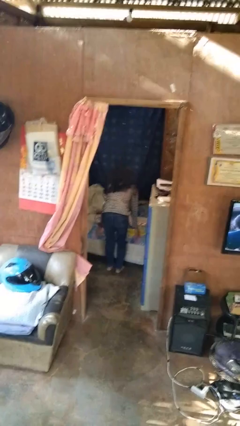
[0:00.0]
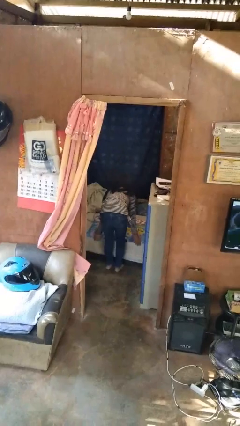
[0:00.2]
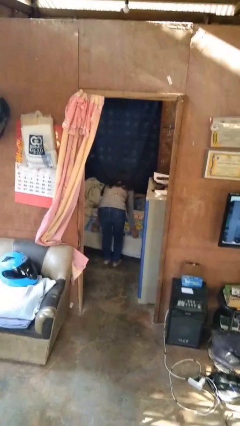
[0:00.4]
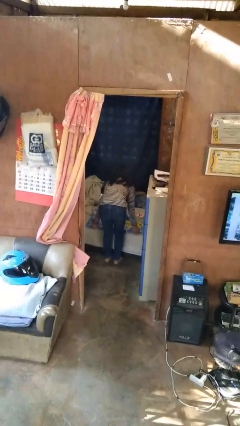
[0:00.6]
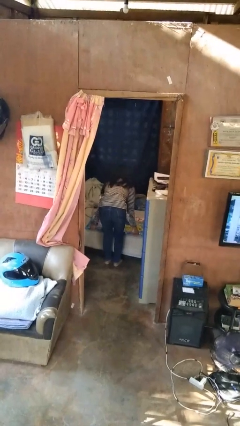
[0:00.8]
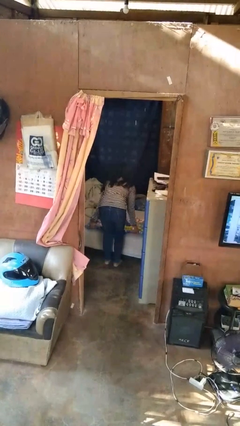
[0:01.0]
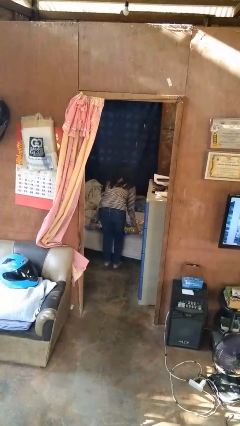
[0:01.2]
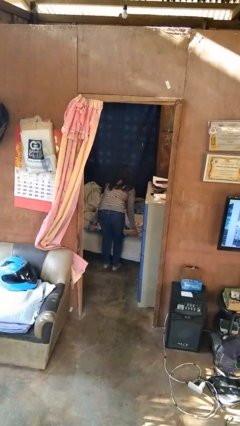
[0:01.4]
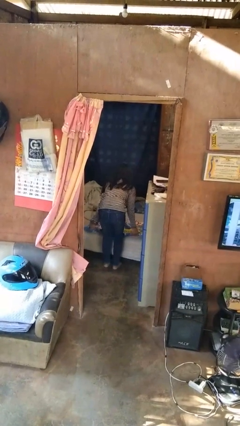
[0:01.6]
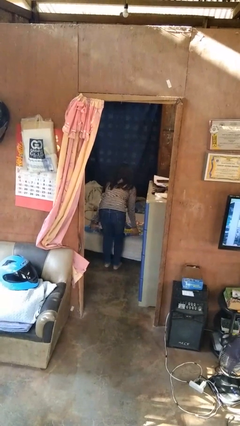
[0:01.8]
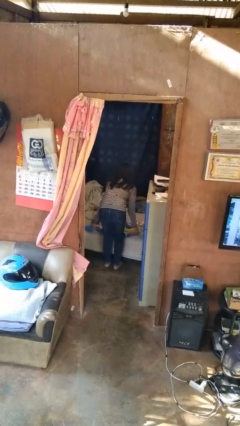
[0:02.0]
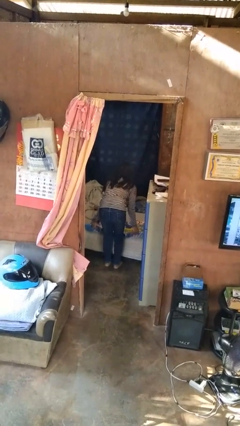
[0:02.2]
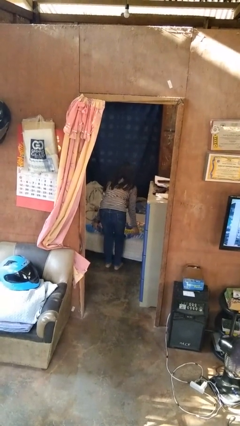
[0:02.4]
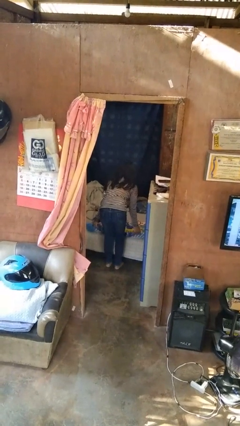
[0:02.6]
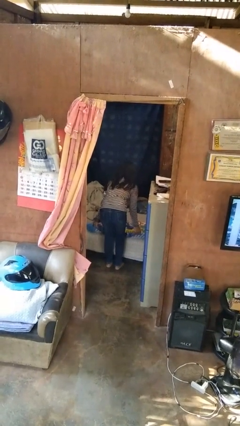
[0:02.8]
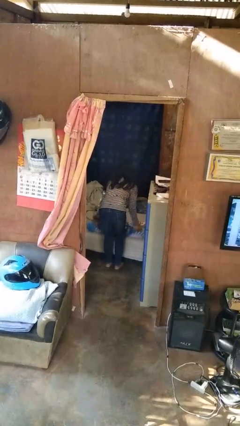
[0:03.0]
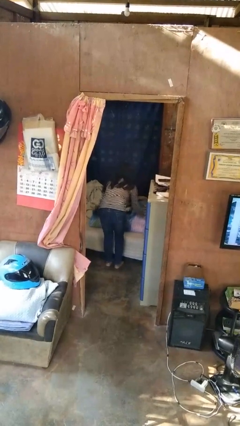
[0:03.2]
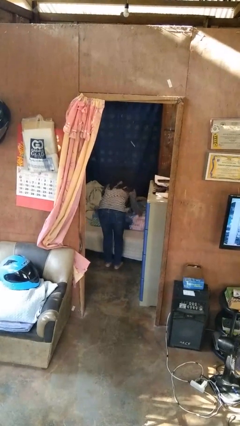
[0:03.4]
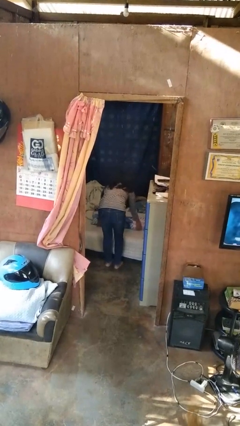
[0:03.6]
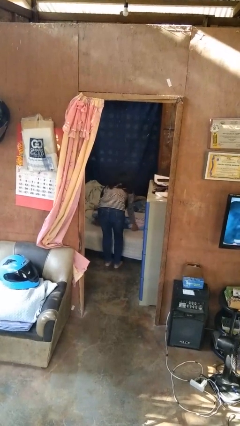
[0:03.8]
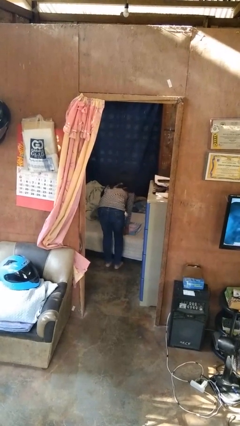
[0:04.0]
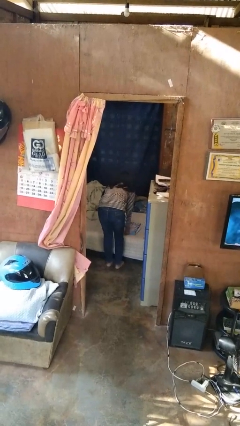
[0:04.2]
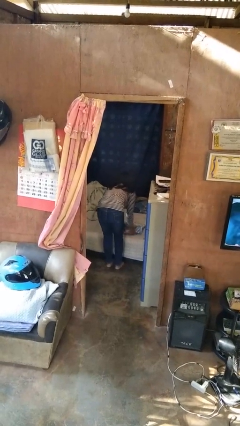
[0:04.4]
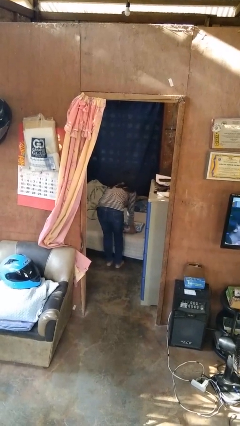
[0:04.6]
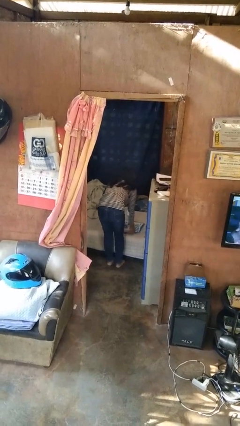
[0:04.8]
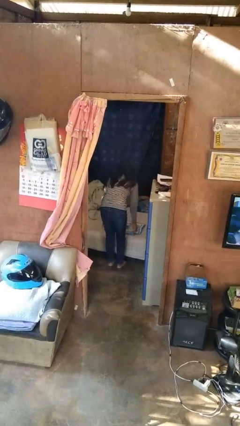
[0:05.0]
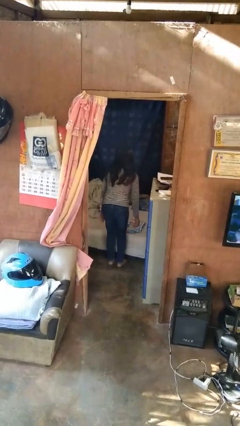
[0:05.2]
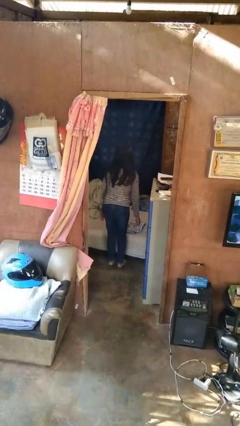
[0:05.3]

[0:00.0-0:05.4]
person folds blanket

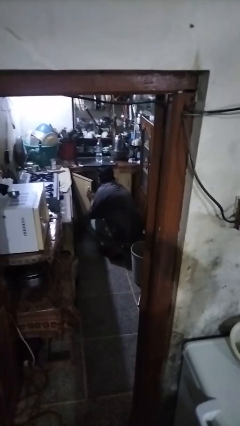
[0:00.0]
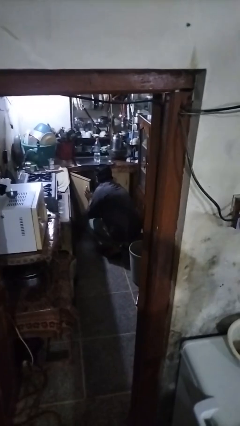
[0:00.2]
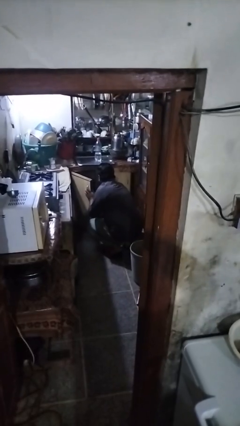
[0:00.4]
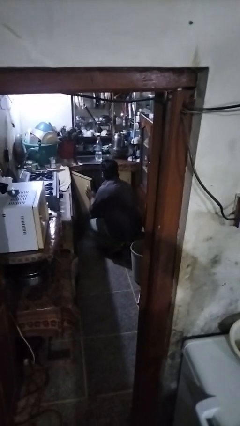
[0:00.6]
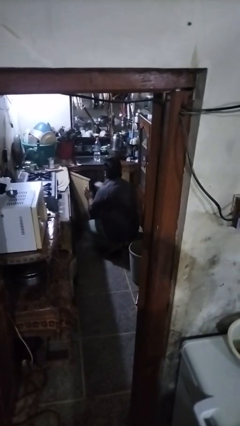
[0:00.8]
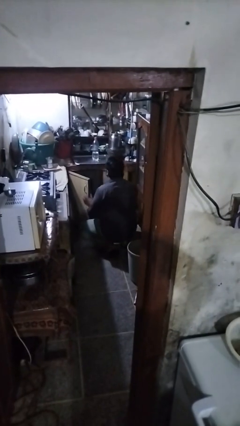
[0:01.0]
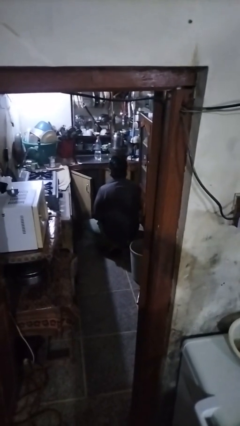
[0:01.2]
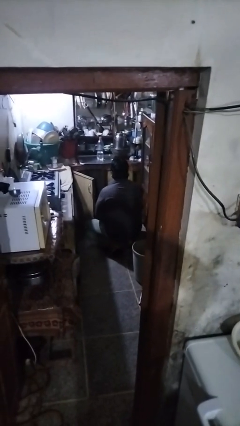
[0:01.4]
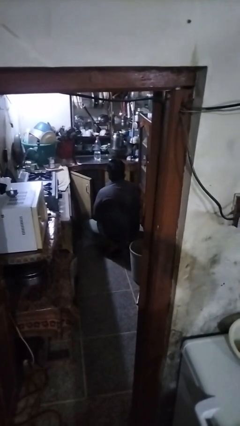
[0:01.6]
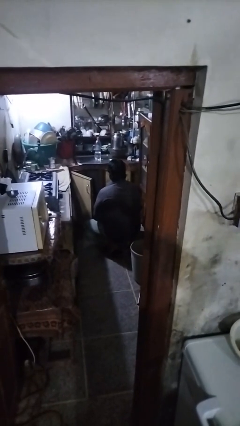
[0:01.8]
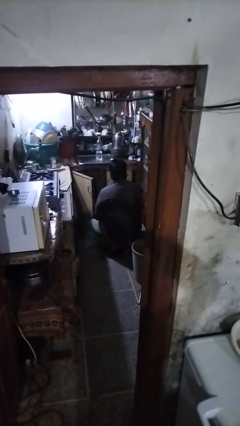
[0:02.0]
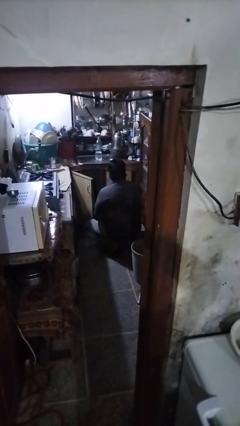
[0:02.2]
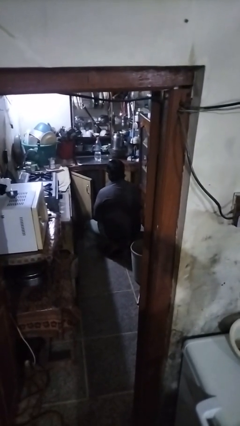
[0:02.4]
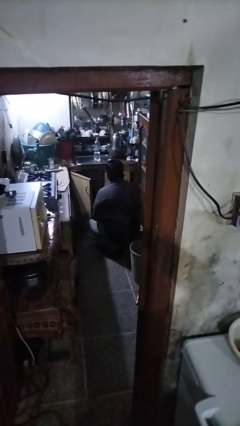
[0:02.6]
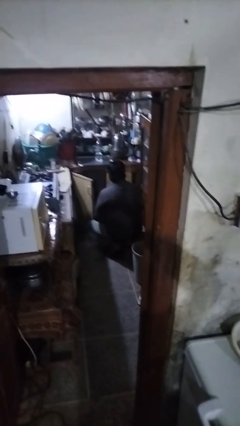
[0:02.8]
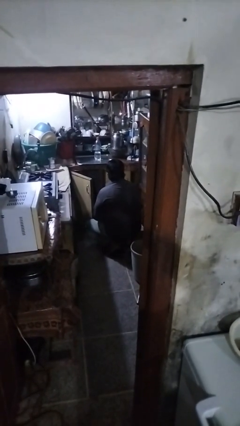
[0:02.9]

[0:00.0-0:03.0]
person takes object from cabinet

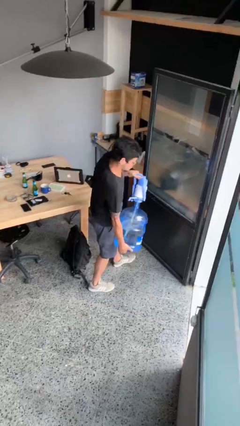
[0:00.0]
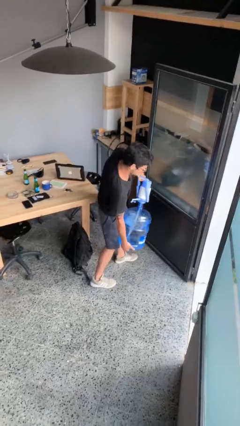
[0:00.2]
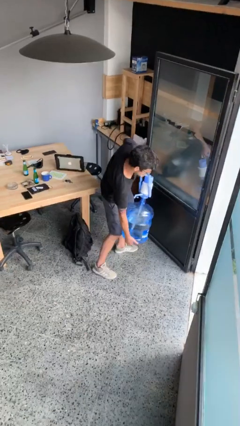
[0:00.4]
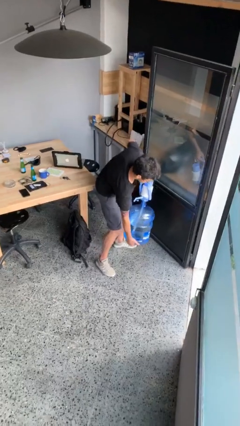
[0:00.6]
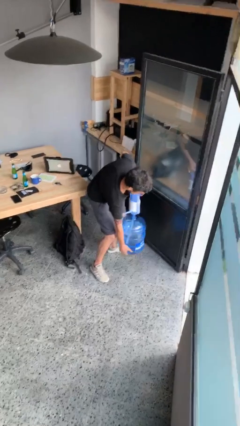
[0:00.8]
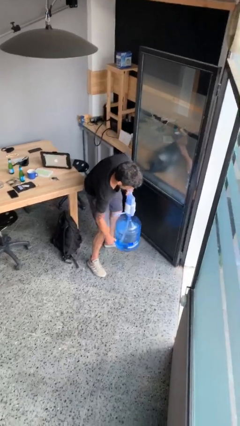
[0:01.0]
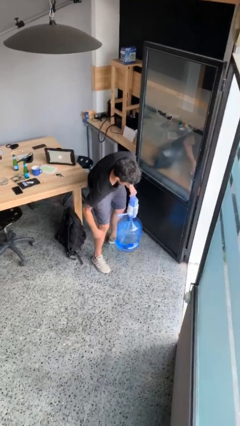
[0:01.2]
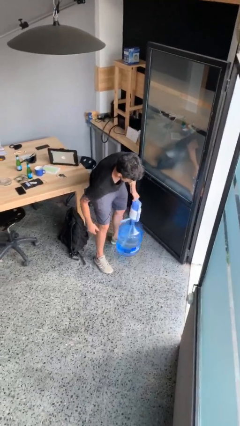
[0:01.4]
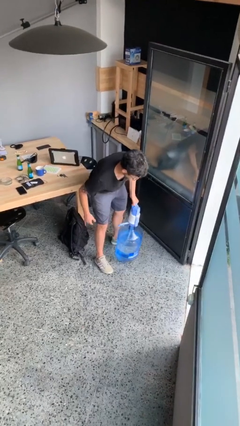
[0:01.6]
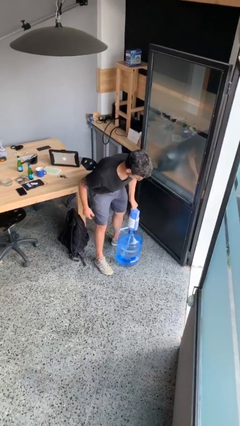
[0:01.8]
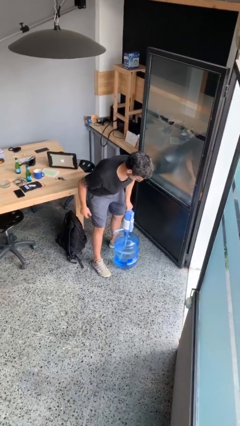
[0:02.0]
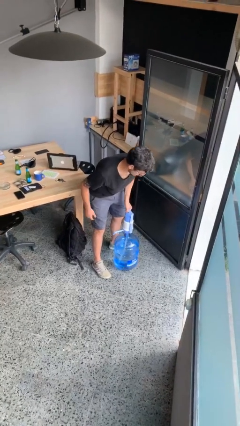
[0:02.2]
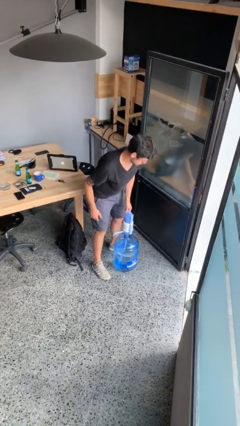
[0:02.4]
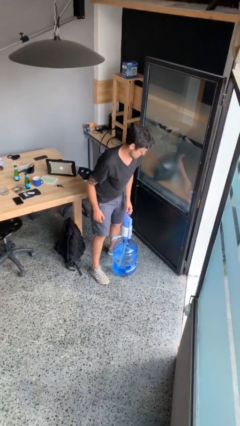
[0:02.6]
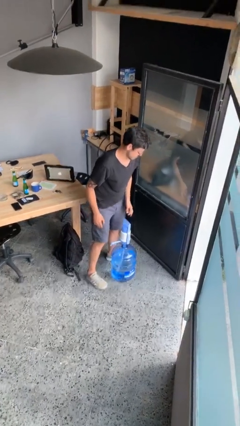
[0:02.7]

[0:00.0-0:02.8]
person puts down object on floor

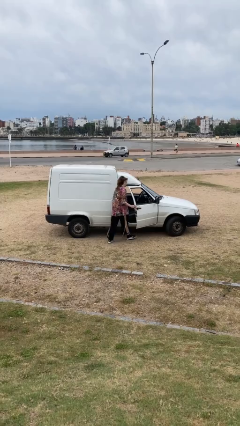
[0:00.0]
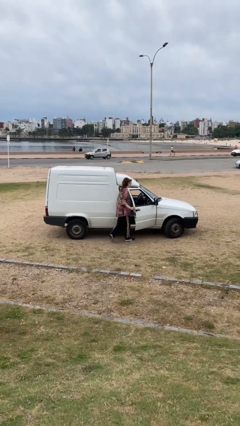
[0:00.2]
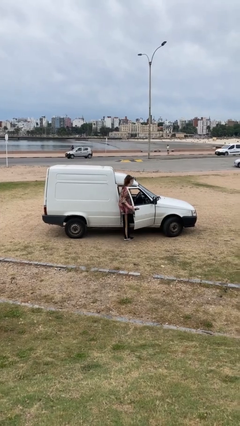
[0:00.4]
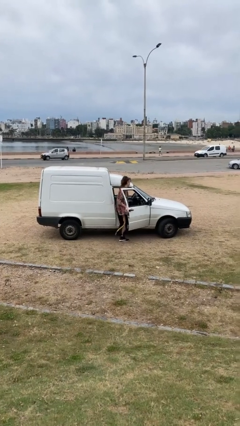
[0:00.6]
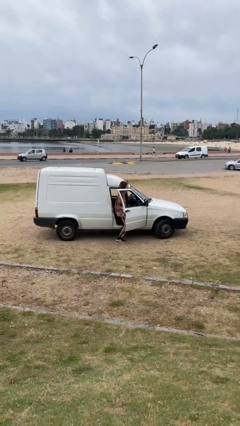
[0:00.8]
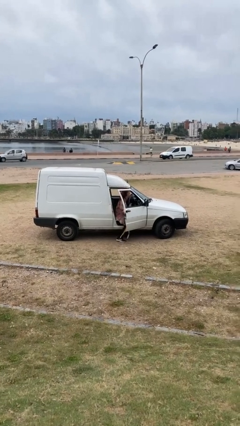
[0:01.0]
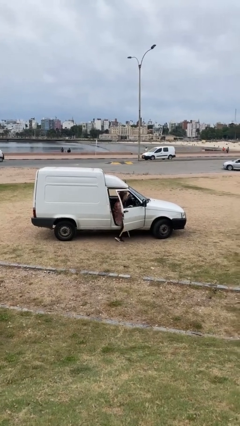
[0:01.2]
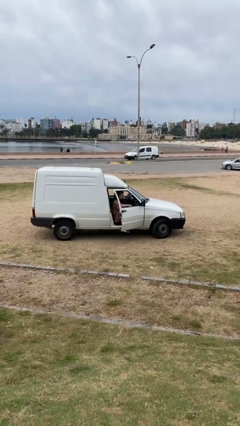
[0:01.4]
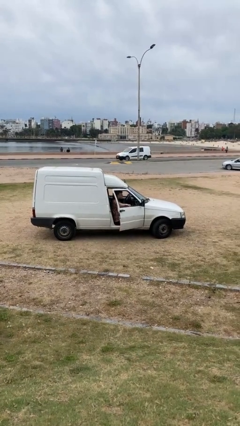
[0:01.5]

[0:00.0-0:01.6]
person enters car

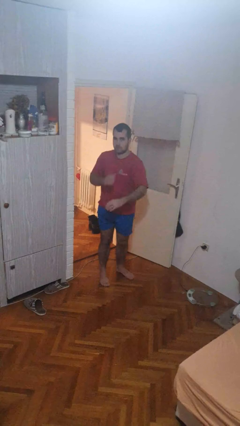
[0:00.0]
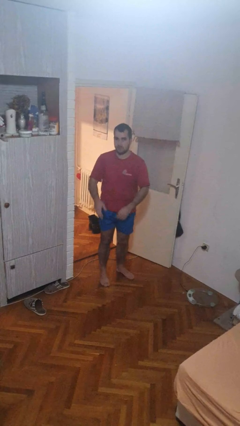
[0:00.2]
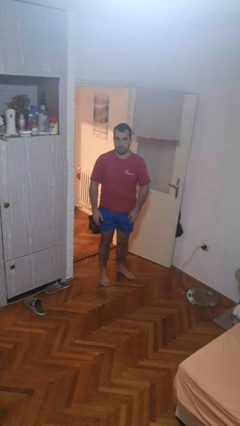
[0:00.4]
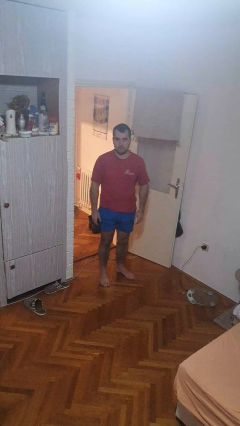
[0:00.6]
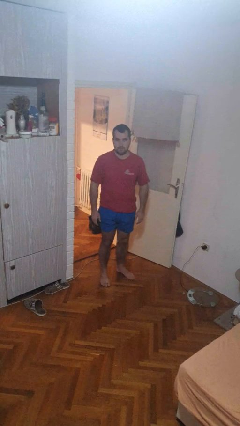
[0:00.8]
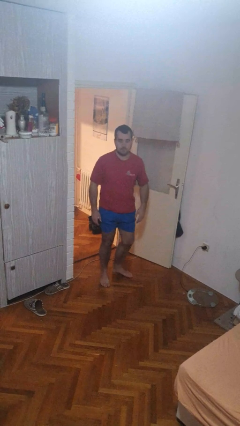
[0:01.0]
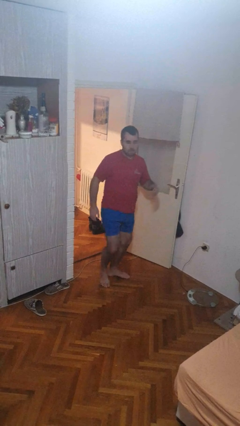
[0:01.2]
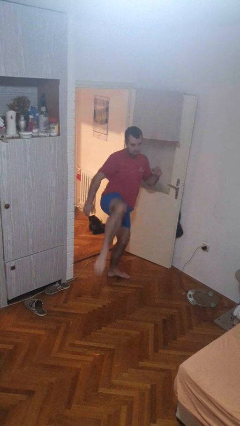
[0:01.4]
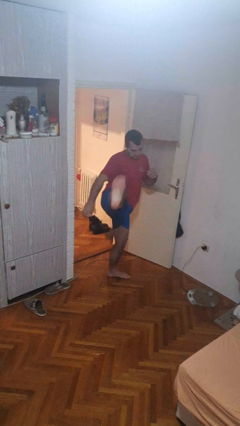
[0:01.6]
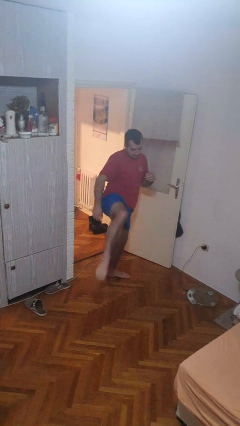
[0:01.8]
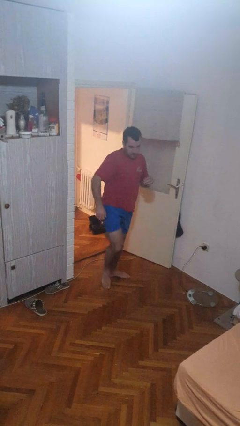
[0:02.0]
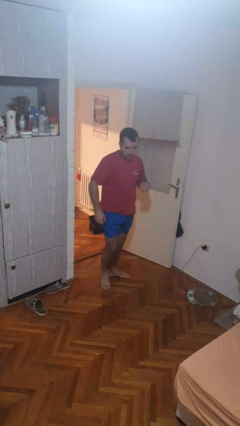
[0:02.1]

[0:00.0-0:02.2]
person karate kicks

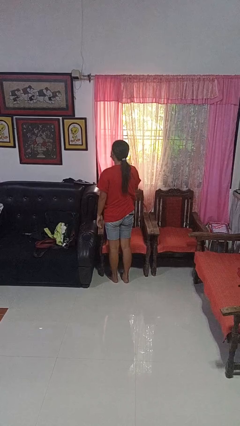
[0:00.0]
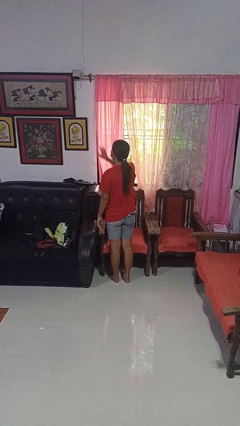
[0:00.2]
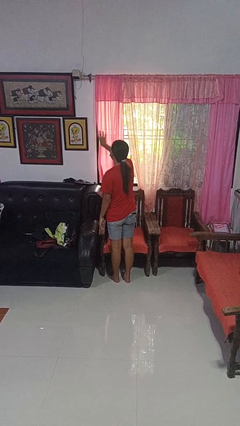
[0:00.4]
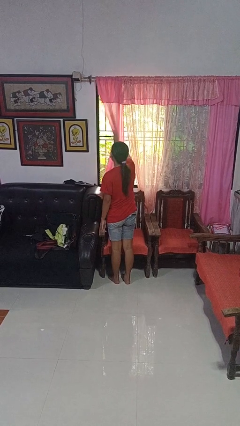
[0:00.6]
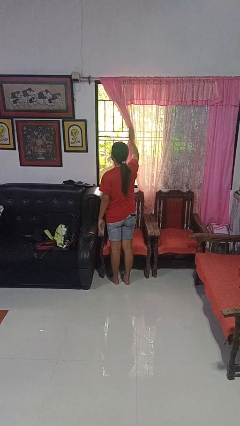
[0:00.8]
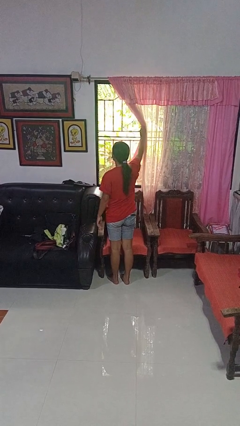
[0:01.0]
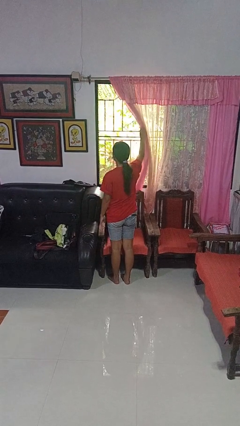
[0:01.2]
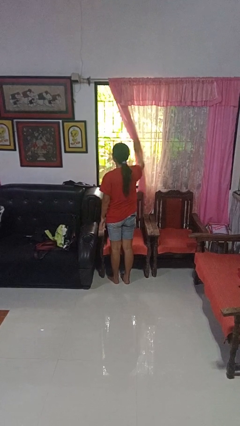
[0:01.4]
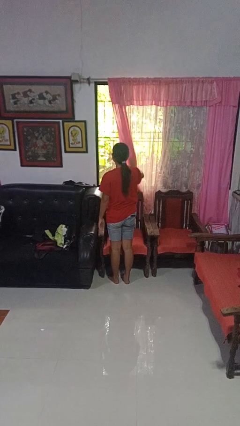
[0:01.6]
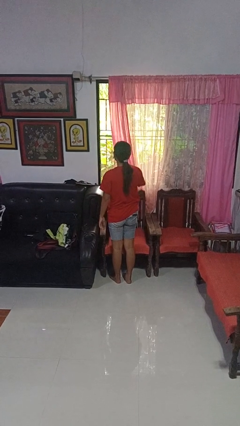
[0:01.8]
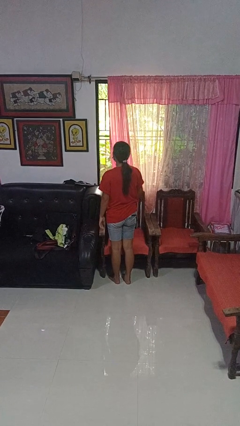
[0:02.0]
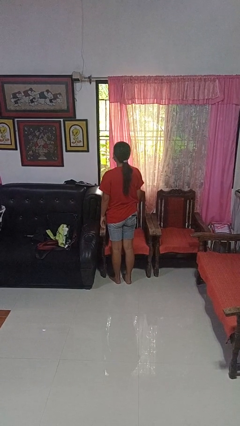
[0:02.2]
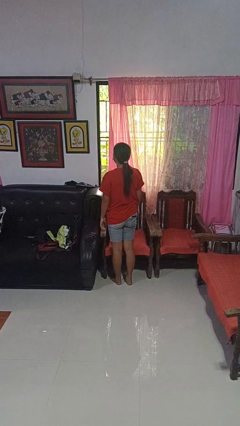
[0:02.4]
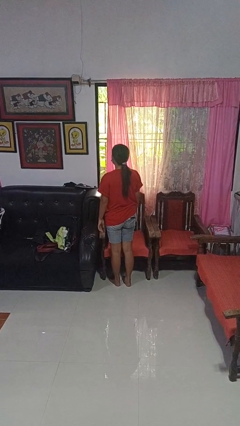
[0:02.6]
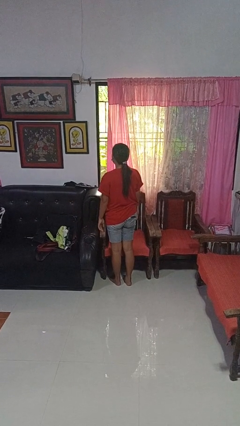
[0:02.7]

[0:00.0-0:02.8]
person opens curtains
